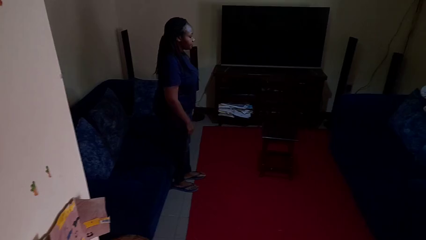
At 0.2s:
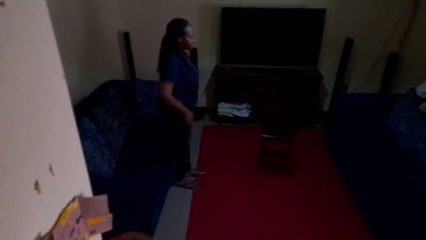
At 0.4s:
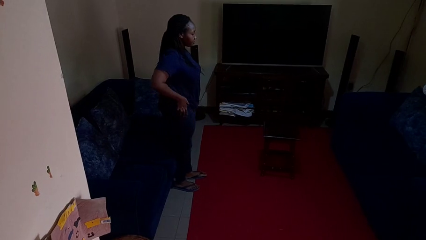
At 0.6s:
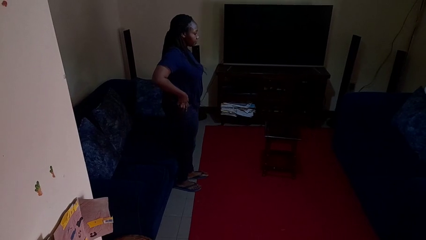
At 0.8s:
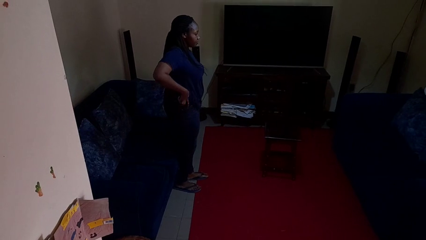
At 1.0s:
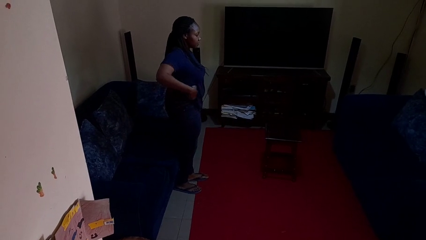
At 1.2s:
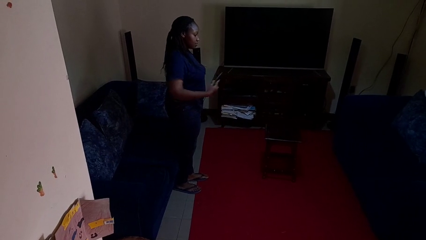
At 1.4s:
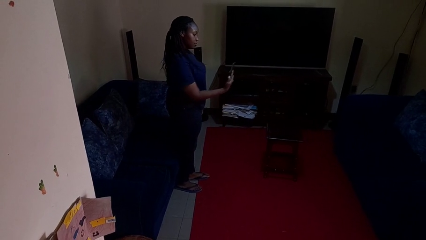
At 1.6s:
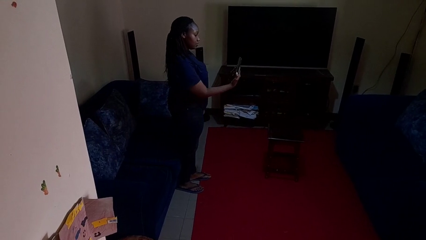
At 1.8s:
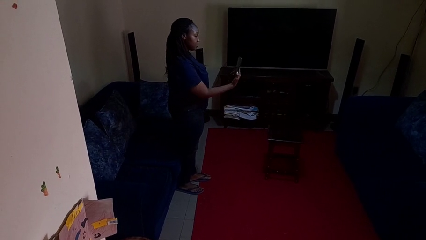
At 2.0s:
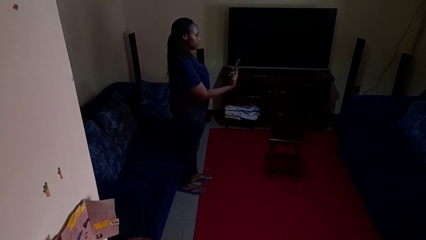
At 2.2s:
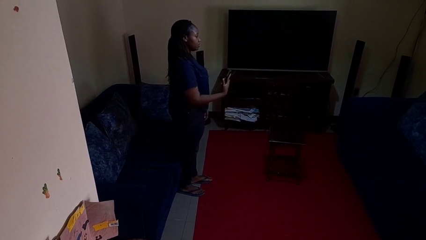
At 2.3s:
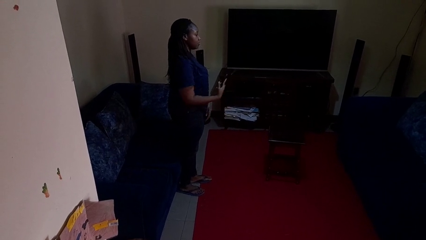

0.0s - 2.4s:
person takes phone from pocket

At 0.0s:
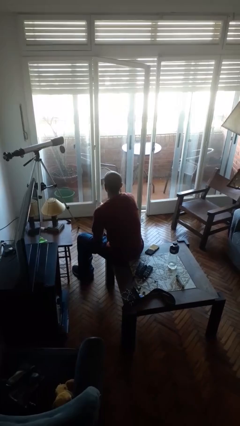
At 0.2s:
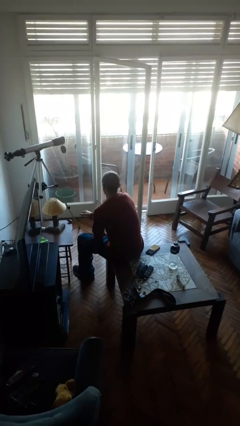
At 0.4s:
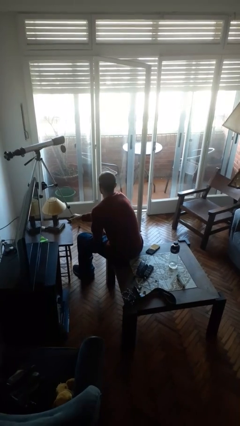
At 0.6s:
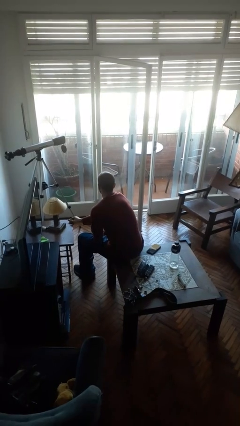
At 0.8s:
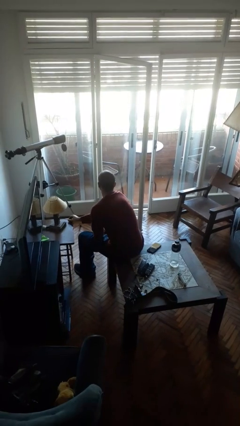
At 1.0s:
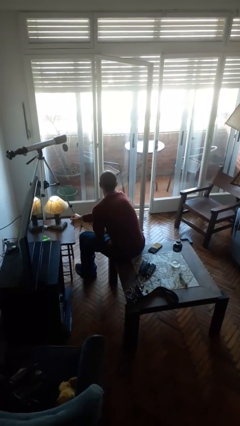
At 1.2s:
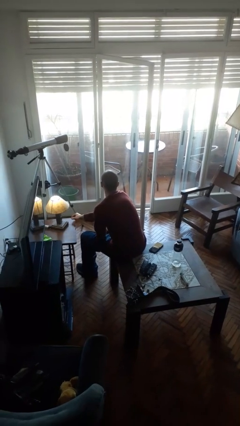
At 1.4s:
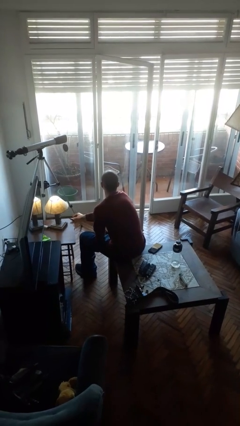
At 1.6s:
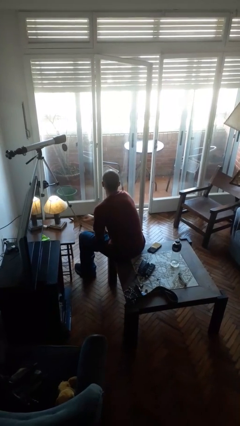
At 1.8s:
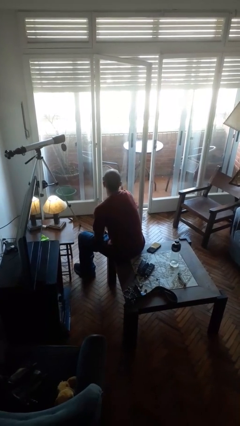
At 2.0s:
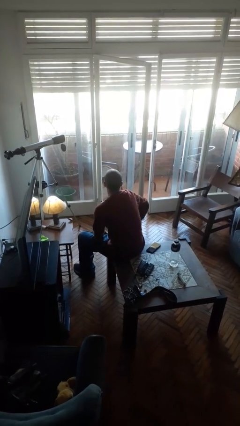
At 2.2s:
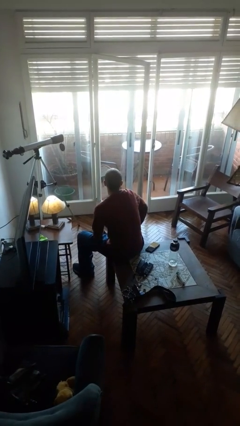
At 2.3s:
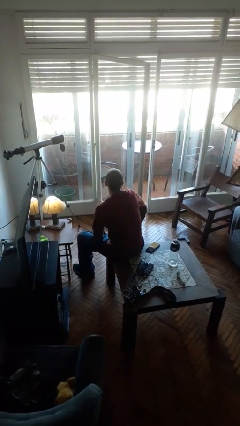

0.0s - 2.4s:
person turns on lamp

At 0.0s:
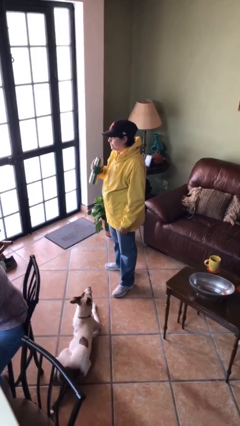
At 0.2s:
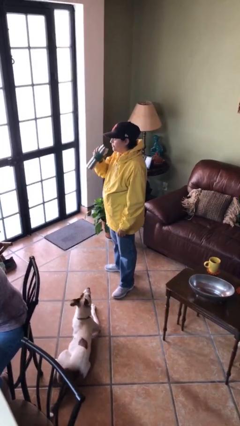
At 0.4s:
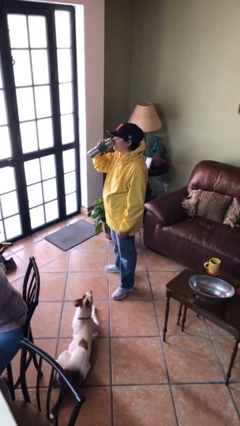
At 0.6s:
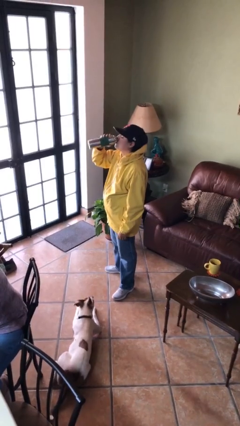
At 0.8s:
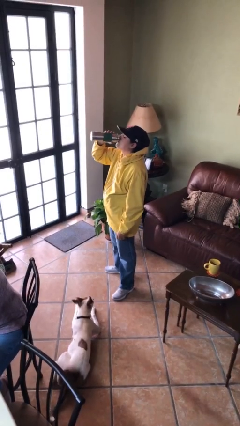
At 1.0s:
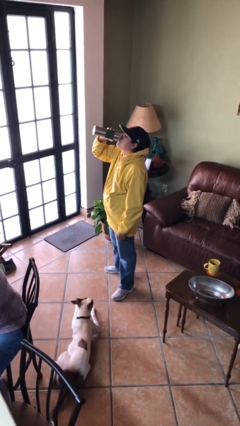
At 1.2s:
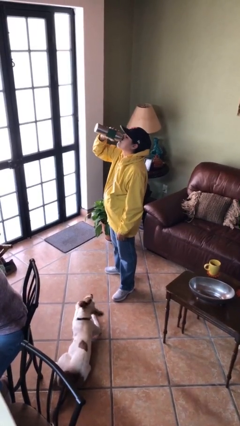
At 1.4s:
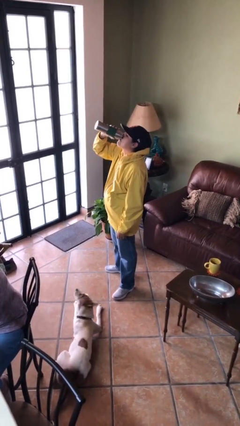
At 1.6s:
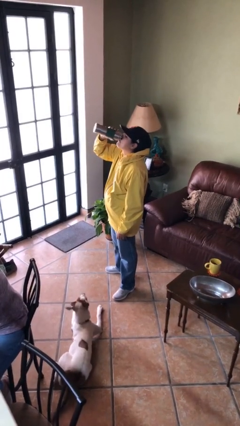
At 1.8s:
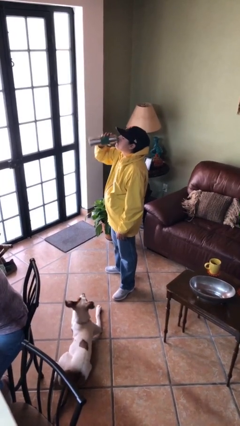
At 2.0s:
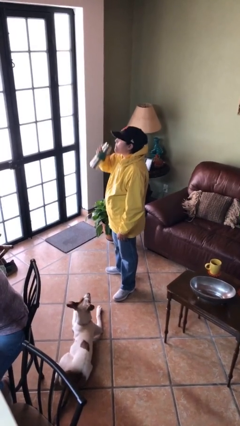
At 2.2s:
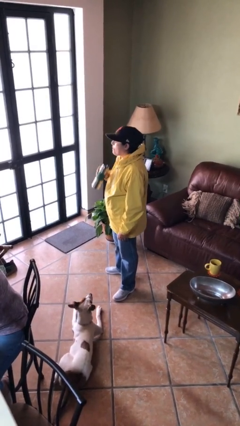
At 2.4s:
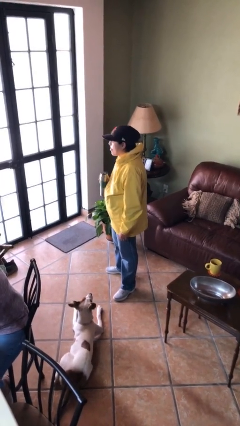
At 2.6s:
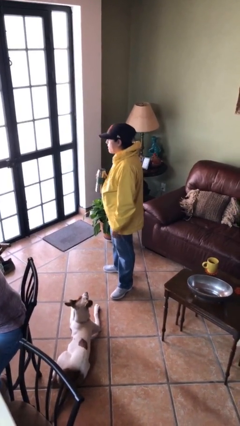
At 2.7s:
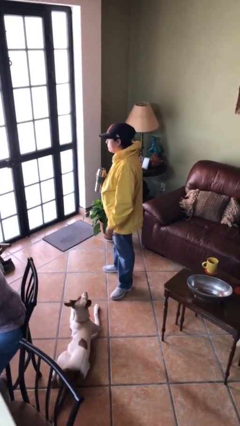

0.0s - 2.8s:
person drinks from bottle

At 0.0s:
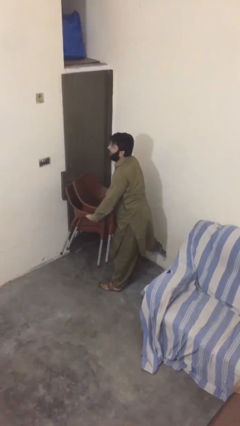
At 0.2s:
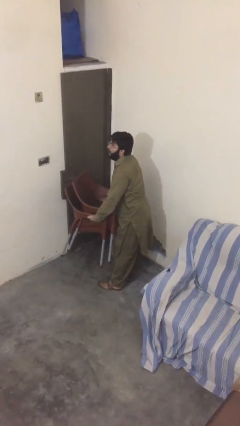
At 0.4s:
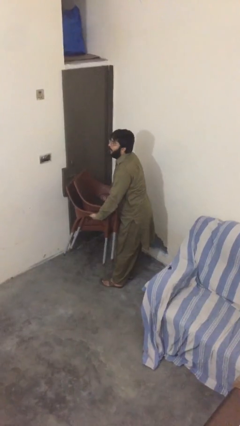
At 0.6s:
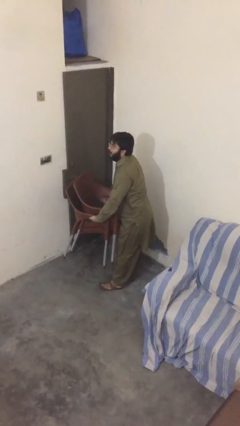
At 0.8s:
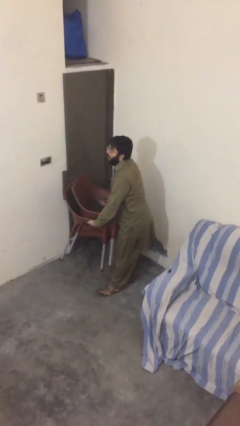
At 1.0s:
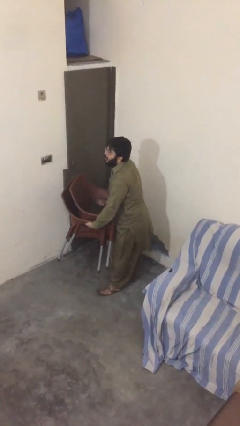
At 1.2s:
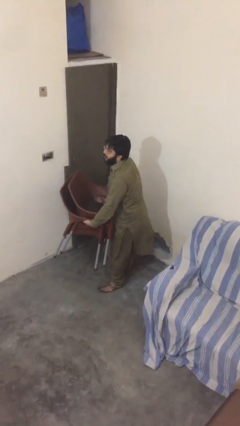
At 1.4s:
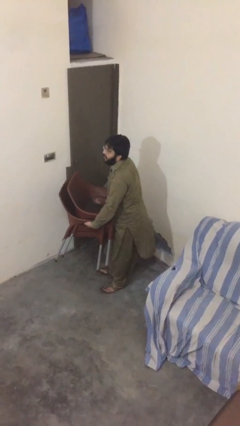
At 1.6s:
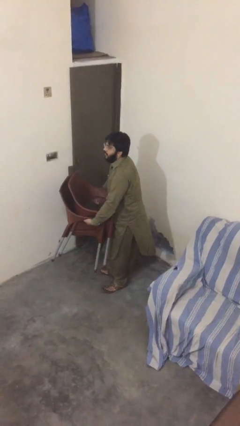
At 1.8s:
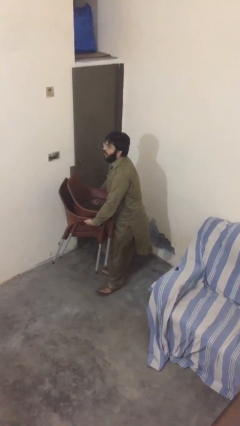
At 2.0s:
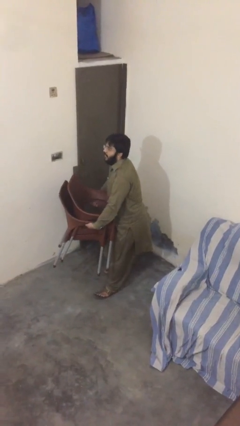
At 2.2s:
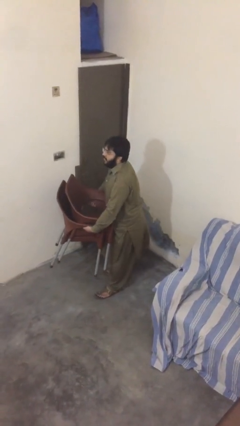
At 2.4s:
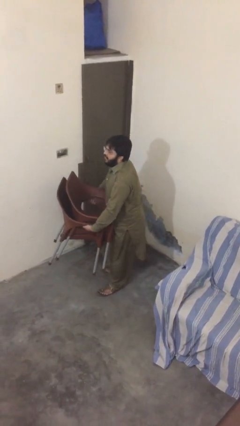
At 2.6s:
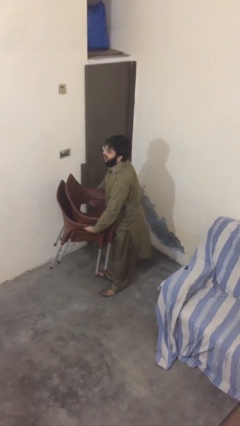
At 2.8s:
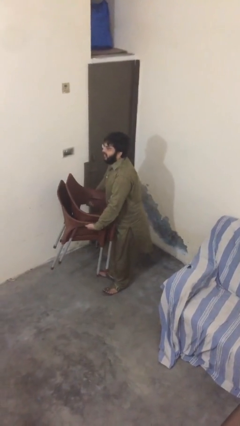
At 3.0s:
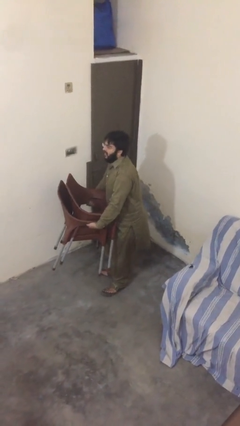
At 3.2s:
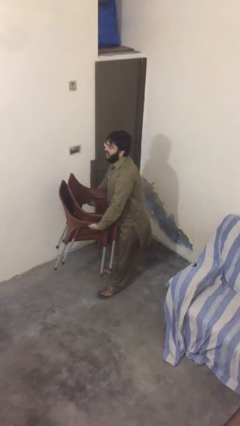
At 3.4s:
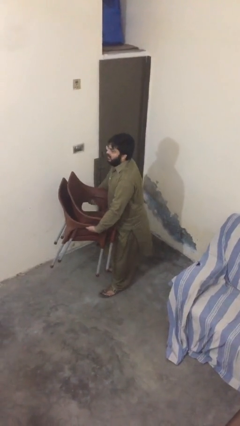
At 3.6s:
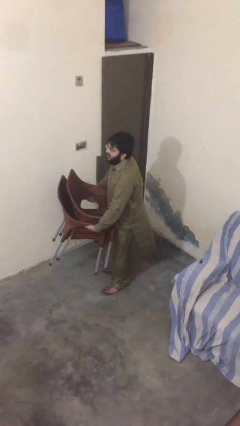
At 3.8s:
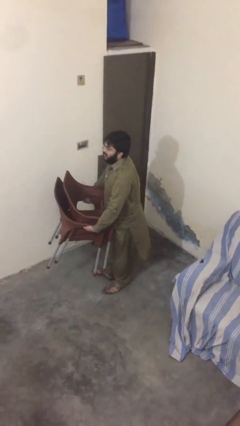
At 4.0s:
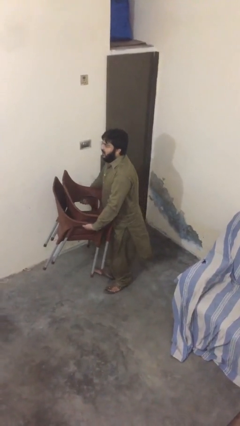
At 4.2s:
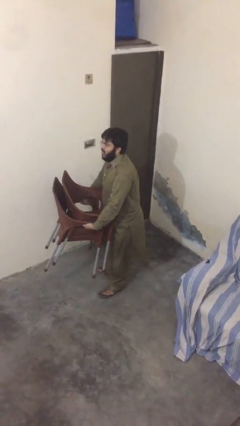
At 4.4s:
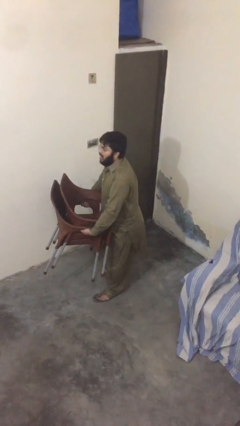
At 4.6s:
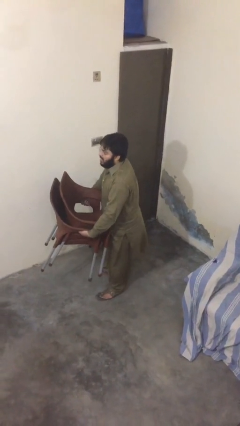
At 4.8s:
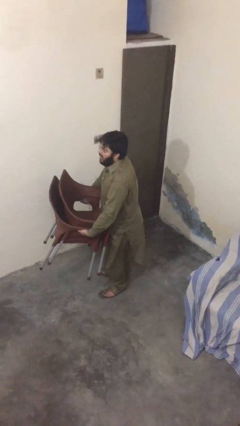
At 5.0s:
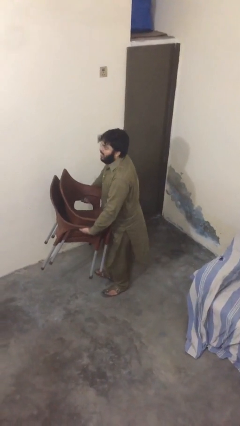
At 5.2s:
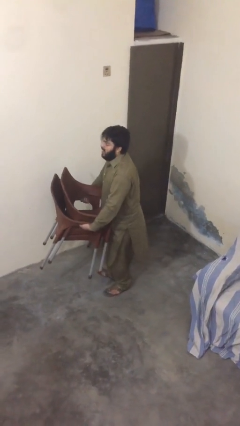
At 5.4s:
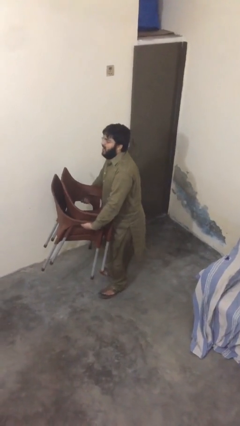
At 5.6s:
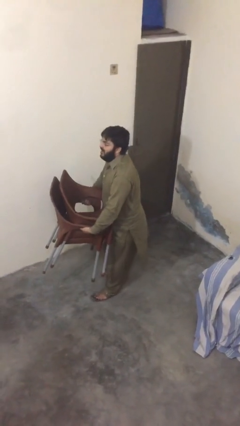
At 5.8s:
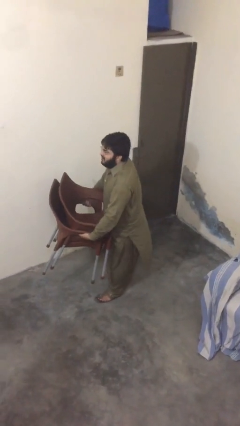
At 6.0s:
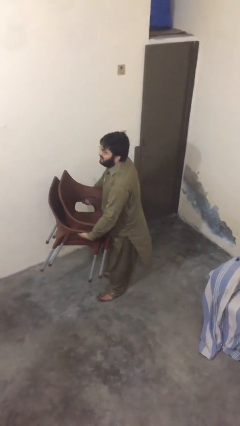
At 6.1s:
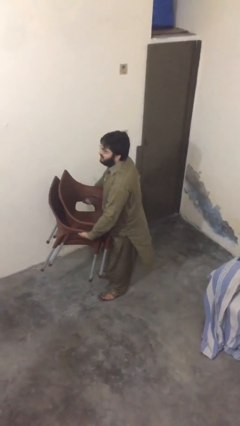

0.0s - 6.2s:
person carries heavy object

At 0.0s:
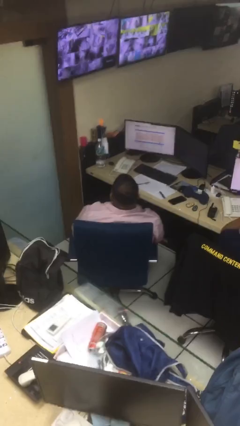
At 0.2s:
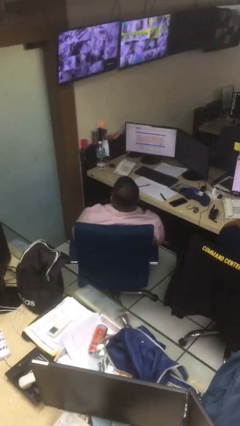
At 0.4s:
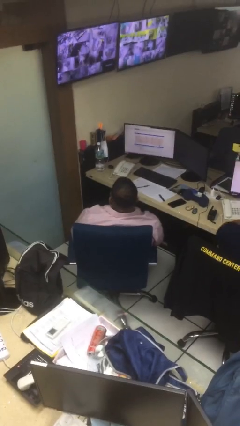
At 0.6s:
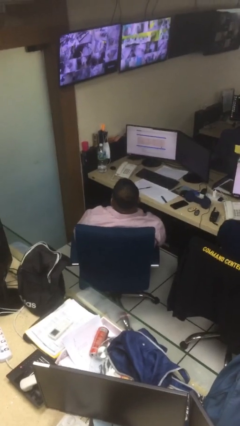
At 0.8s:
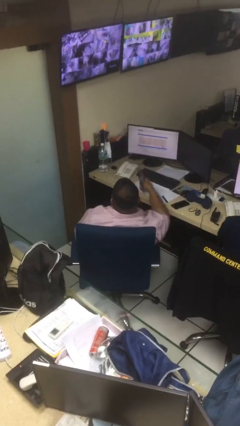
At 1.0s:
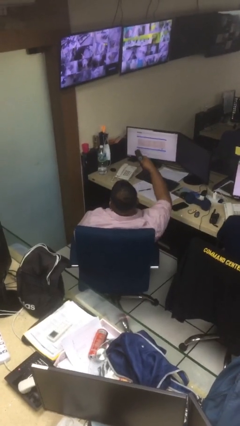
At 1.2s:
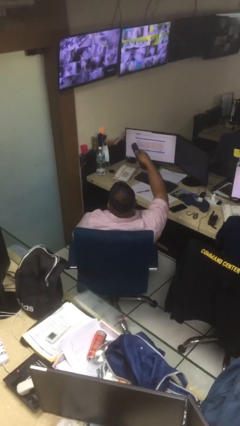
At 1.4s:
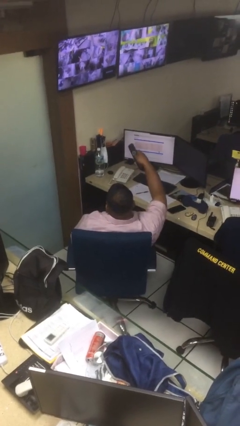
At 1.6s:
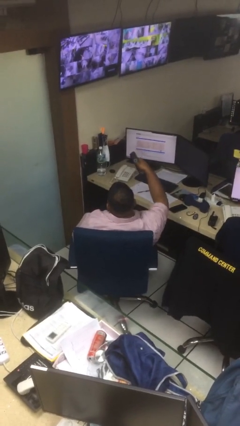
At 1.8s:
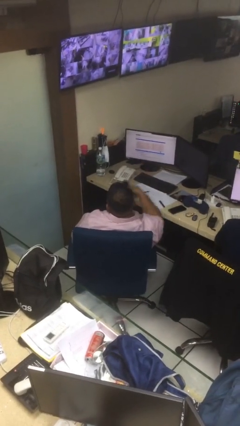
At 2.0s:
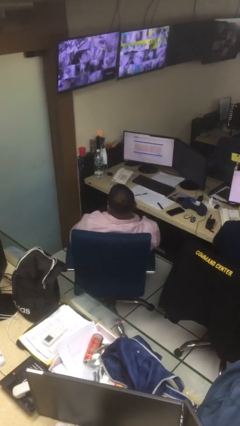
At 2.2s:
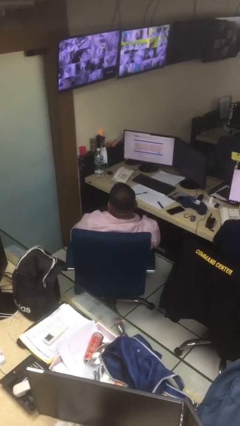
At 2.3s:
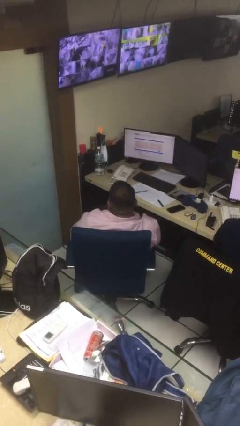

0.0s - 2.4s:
person uses television remote

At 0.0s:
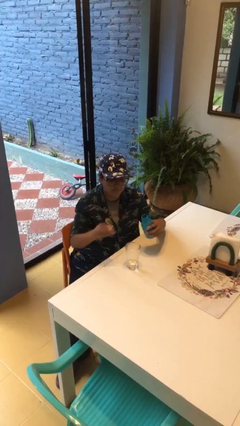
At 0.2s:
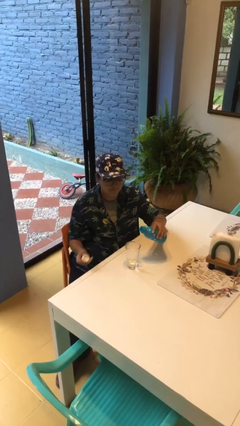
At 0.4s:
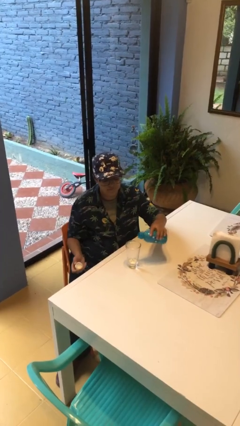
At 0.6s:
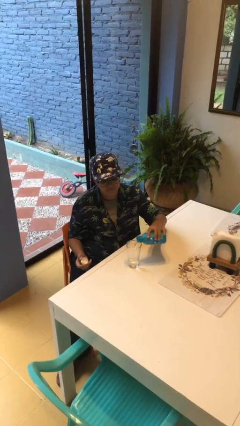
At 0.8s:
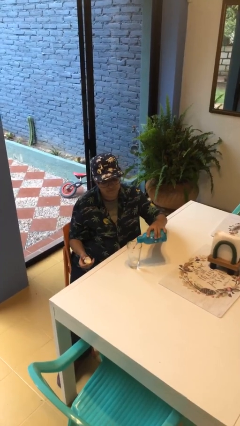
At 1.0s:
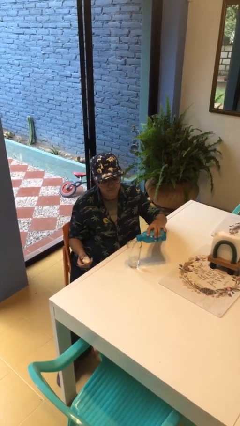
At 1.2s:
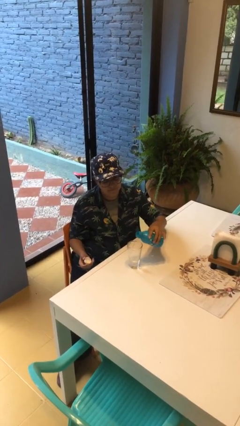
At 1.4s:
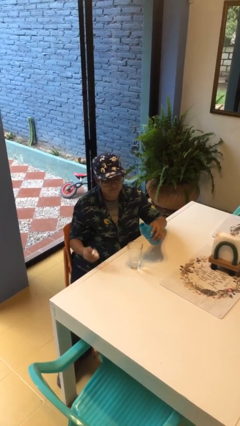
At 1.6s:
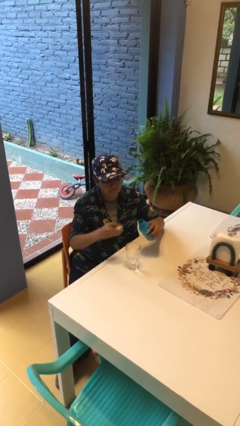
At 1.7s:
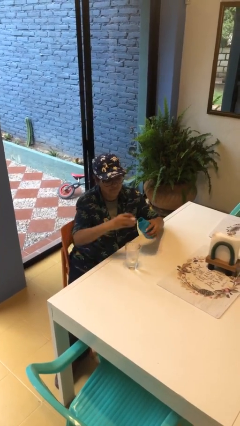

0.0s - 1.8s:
person pours liquid into cup
